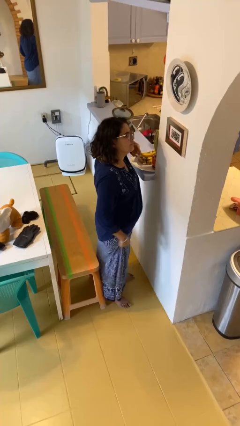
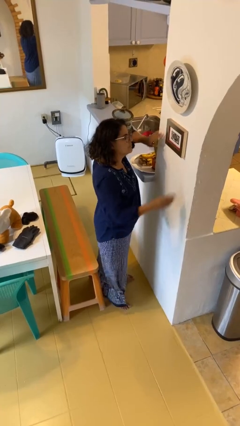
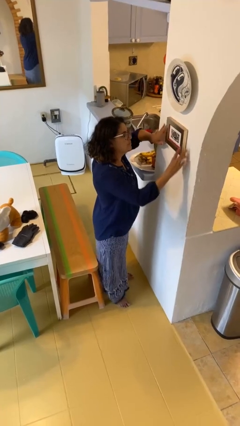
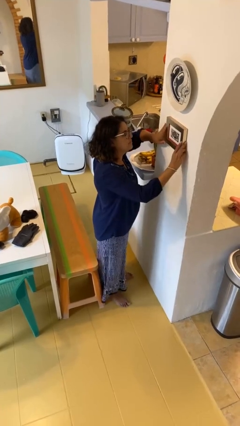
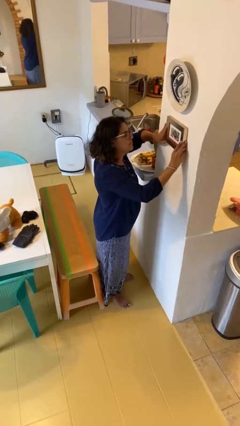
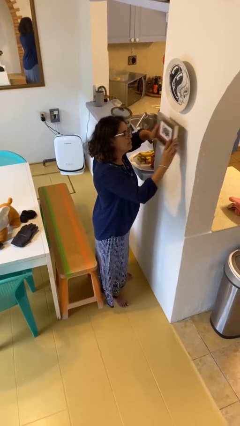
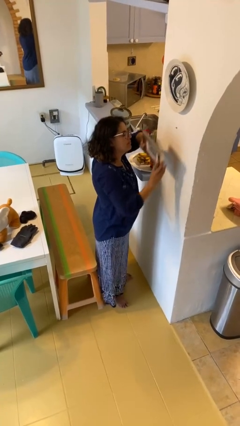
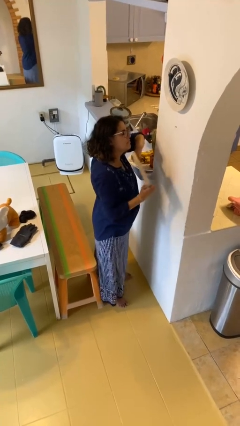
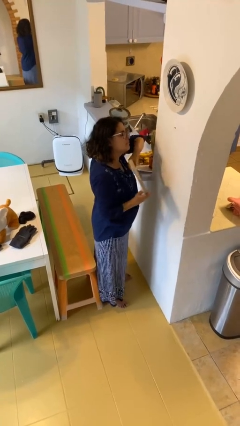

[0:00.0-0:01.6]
person takes down picture frame

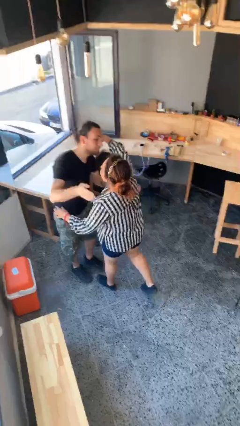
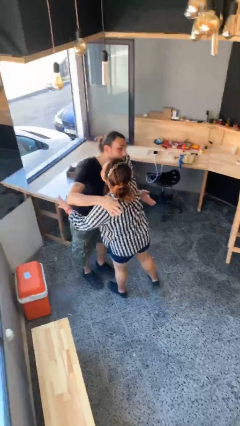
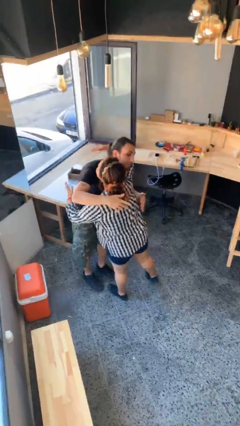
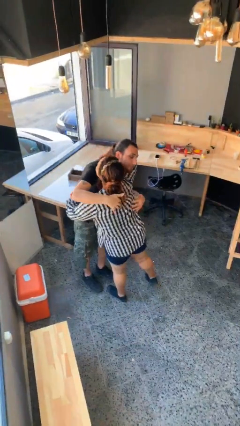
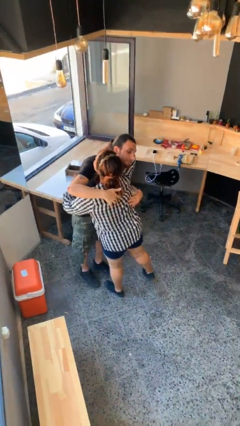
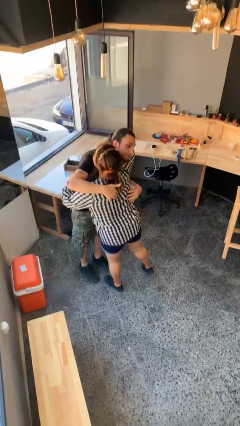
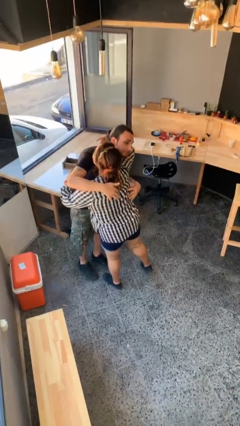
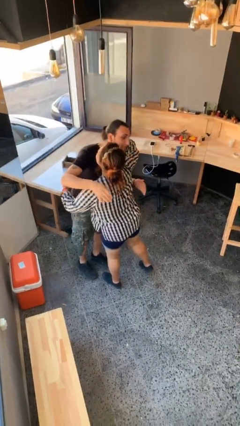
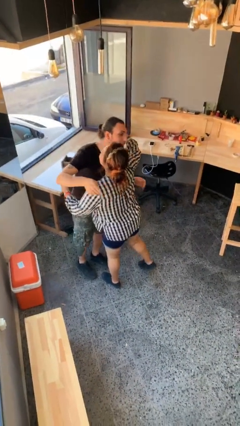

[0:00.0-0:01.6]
person embraces person

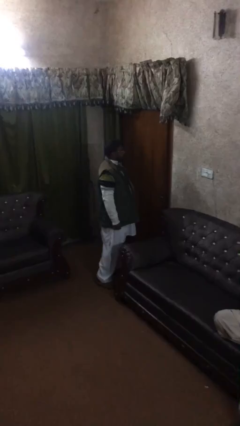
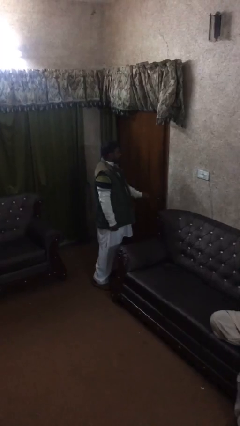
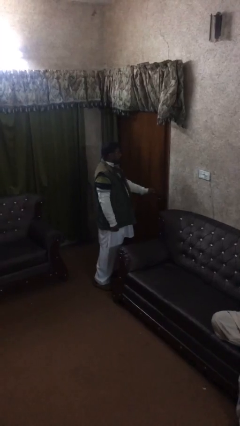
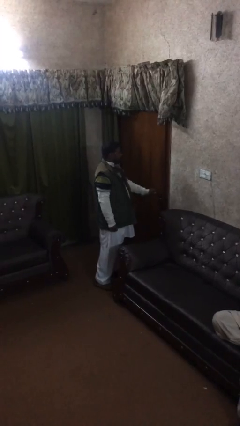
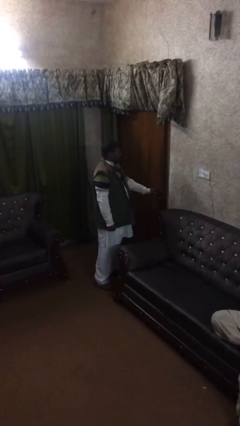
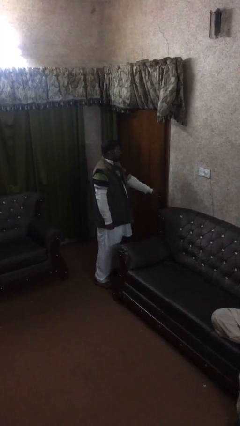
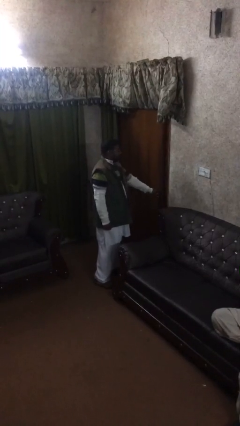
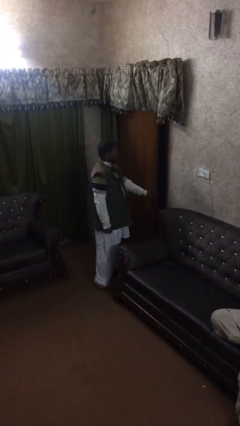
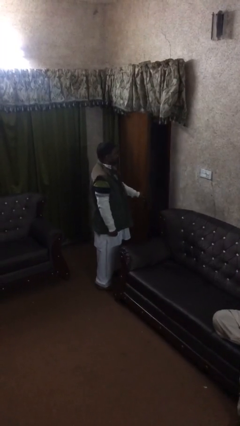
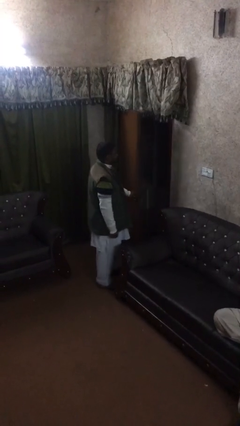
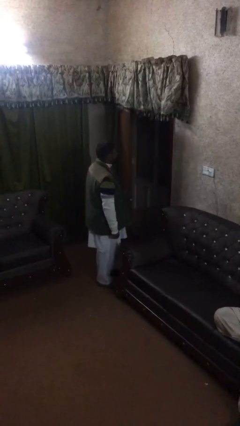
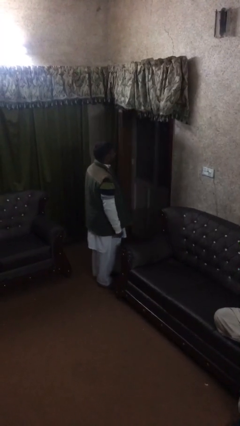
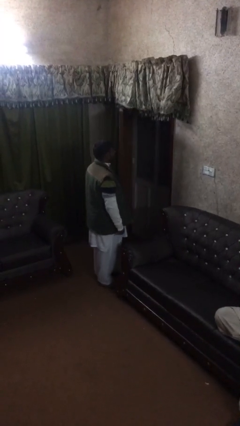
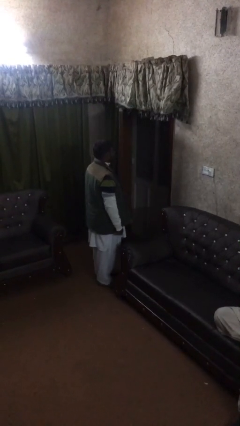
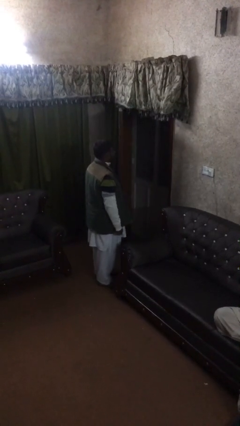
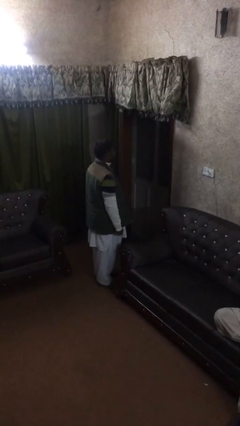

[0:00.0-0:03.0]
person opens facility door

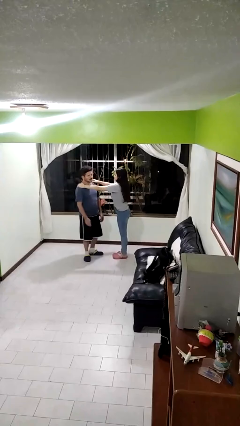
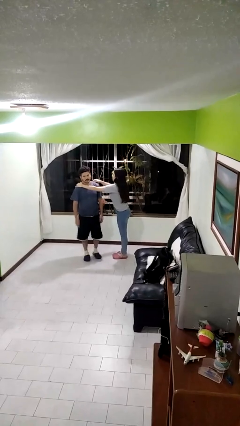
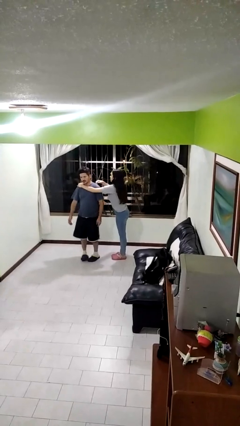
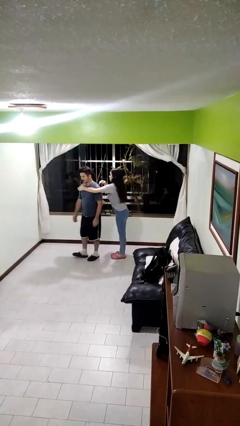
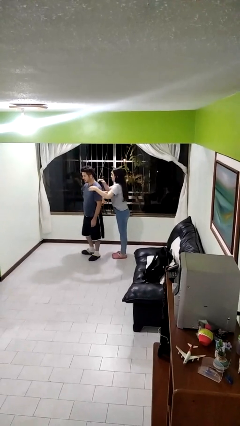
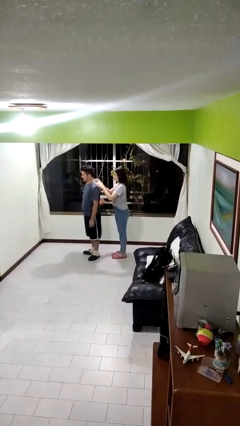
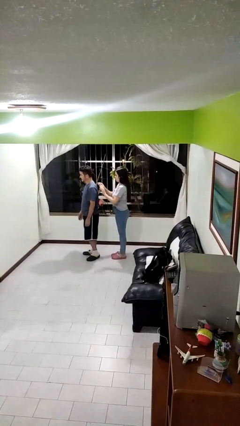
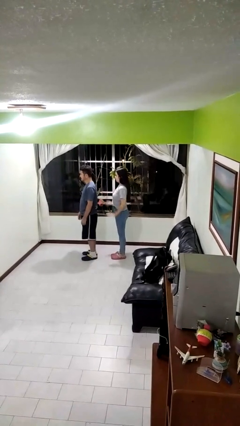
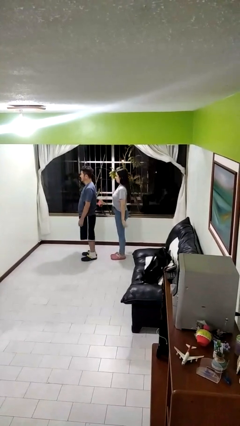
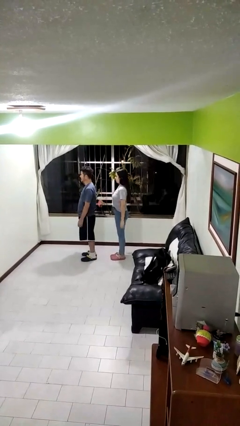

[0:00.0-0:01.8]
person spins person around

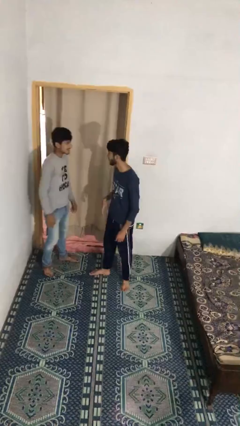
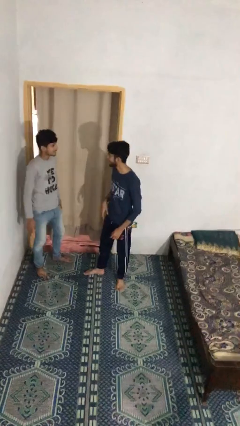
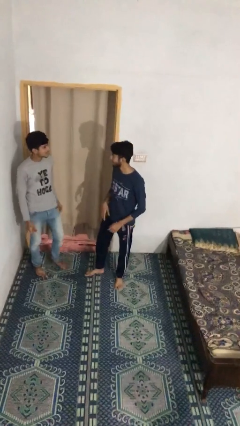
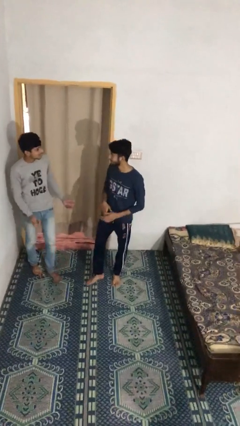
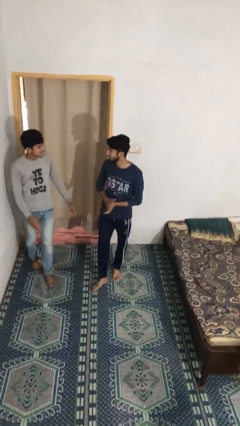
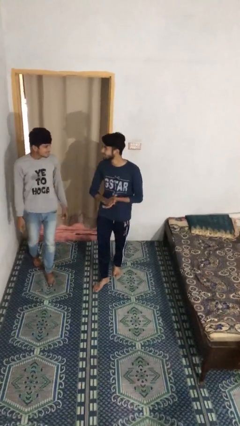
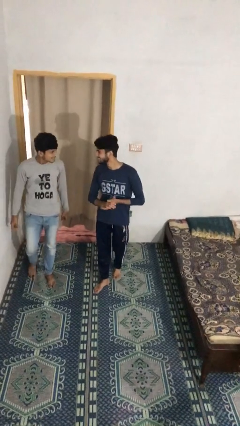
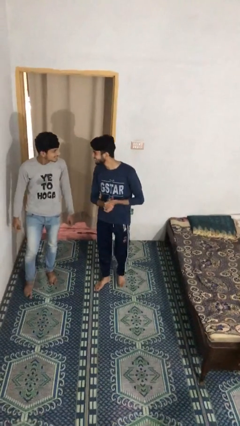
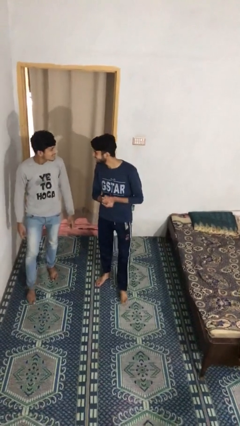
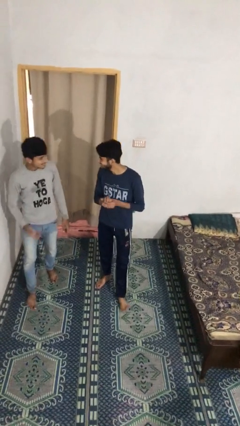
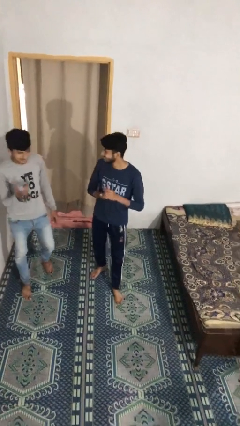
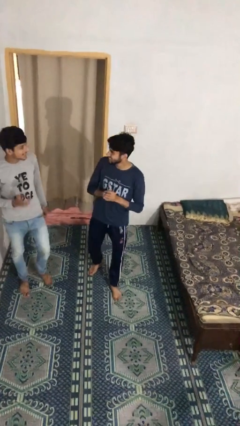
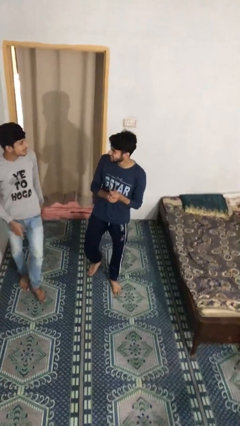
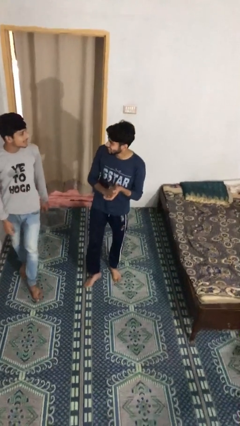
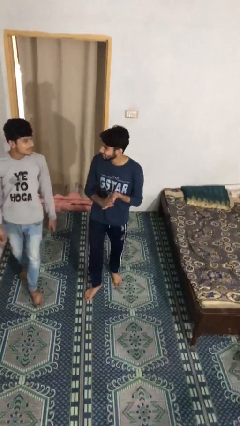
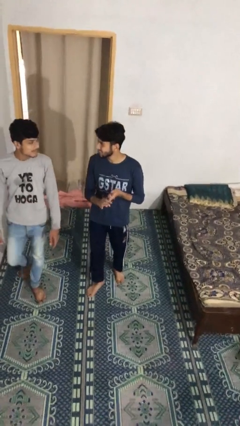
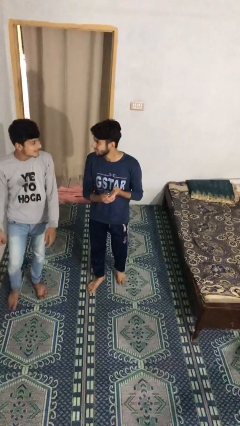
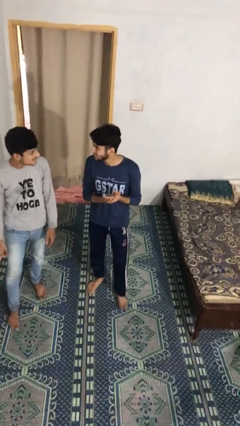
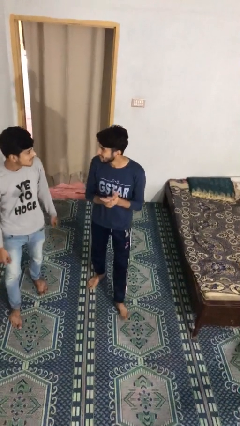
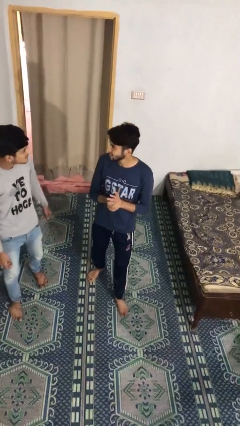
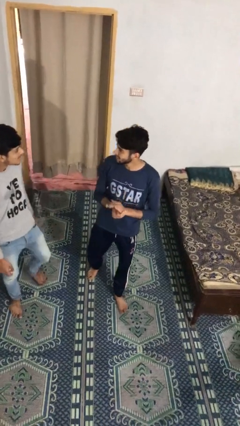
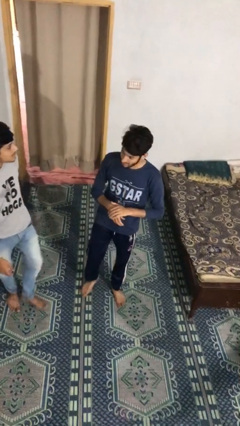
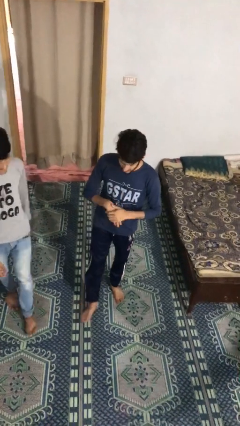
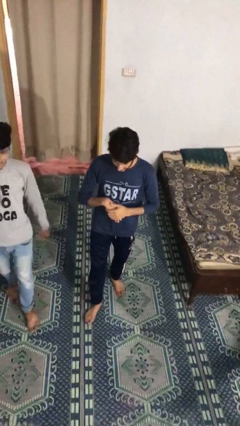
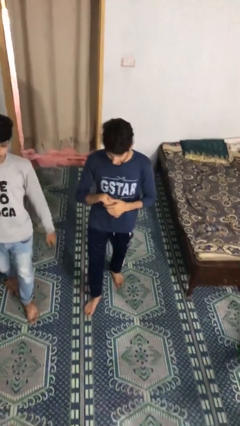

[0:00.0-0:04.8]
person talks to person

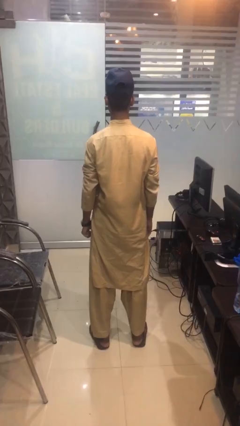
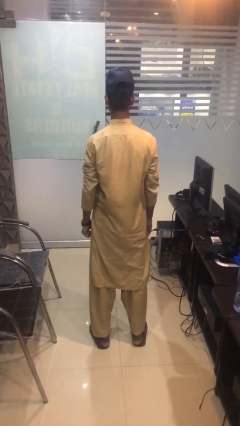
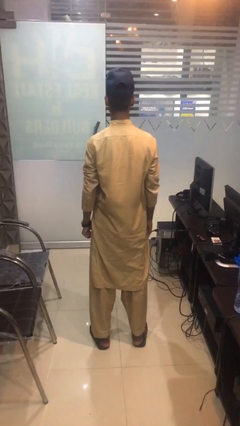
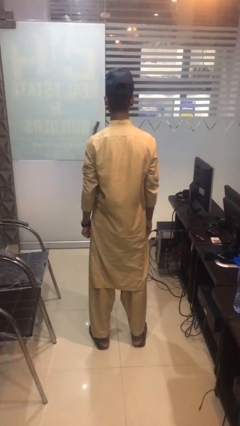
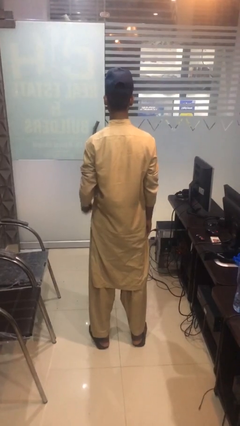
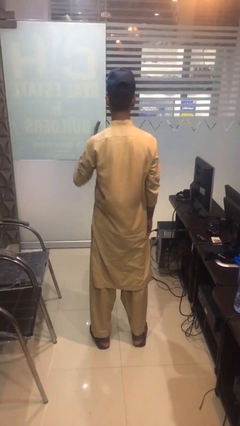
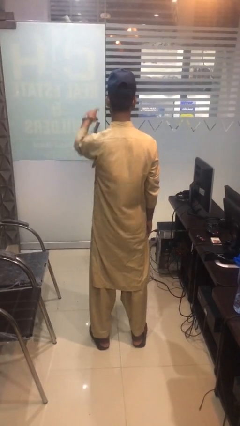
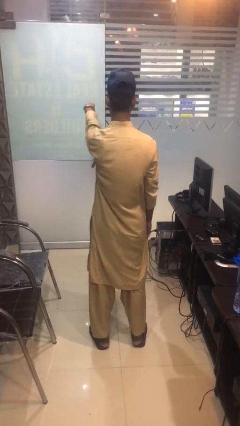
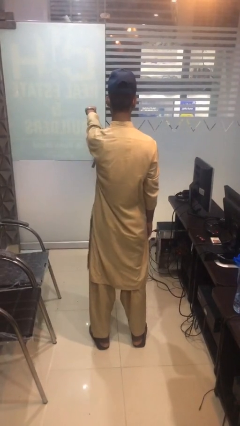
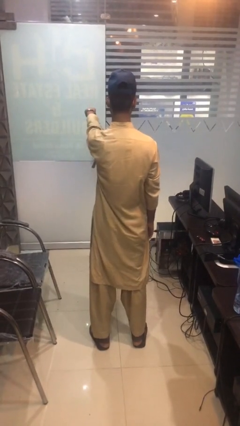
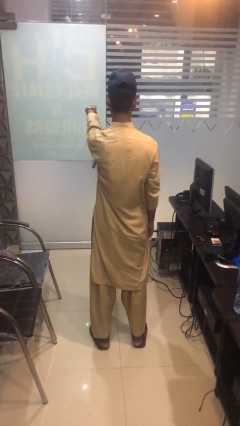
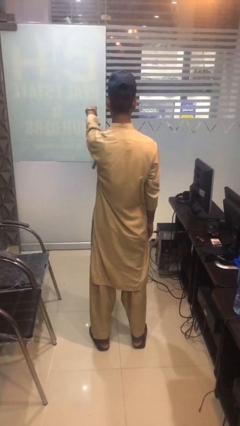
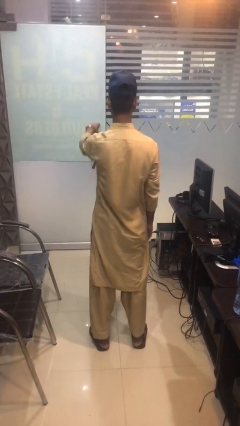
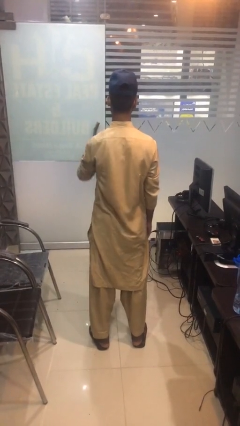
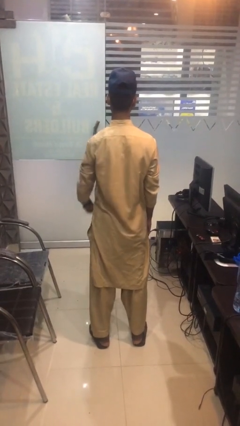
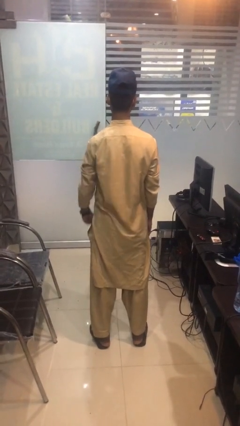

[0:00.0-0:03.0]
person points at person

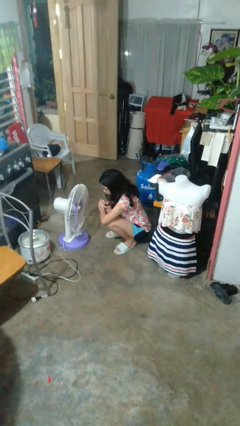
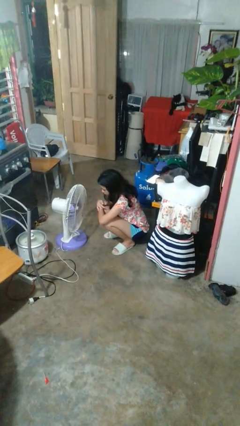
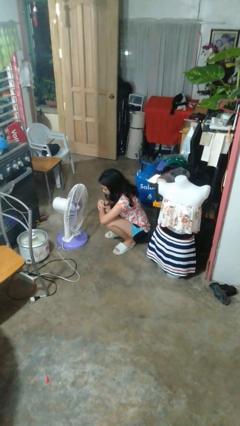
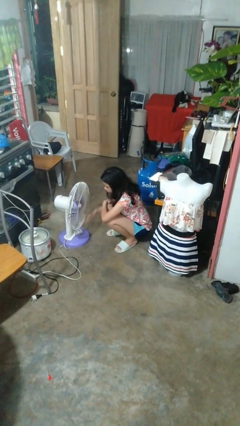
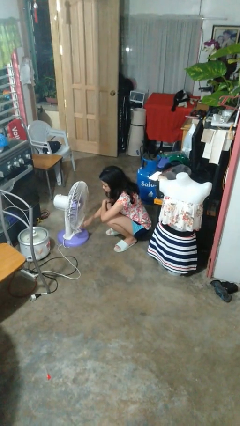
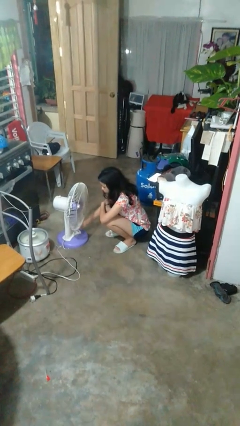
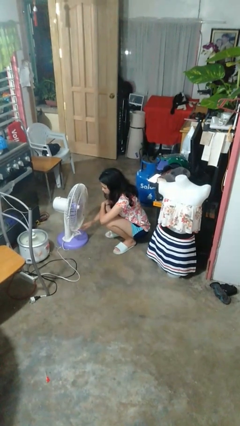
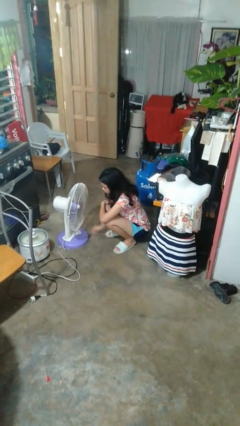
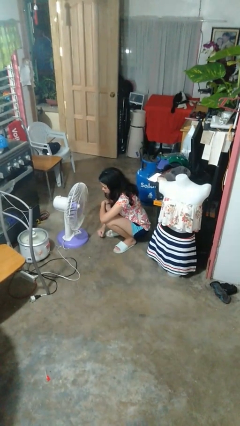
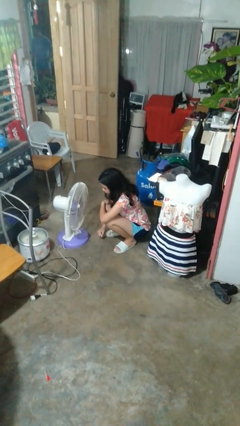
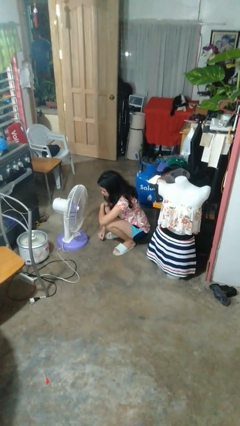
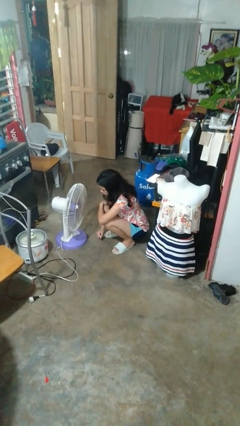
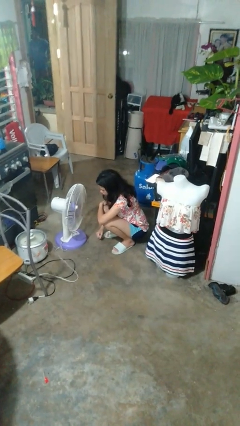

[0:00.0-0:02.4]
person turns on fan
